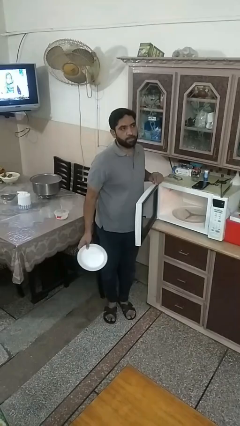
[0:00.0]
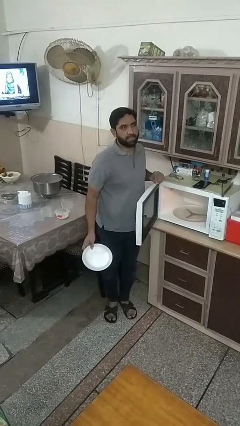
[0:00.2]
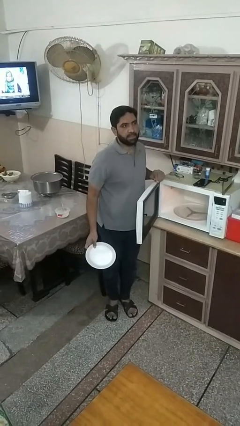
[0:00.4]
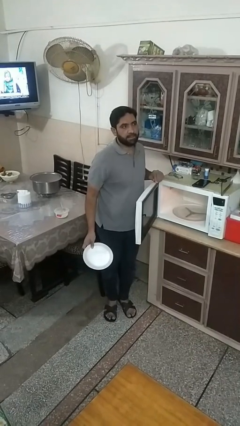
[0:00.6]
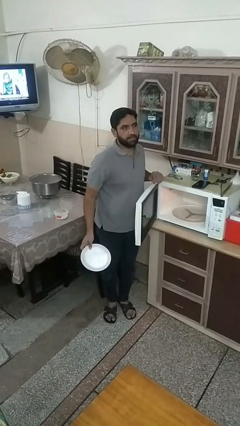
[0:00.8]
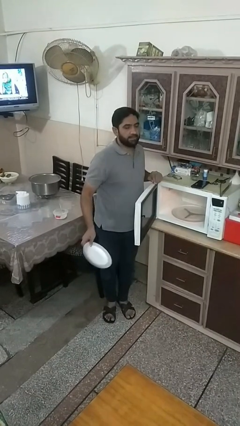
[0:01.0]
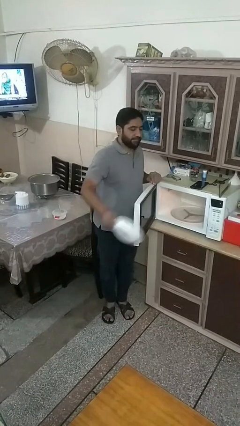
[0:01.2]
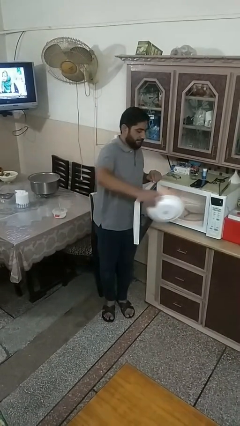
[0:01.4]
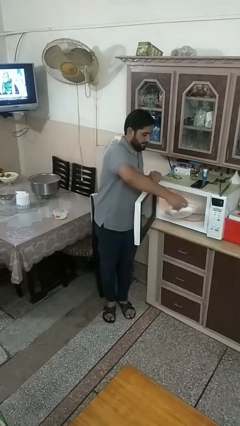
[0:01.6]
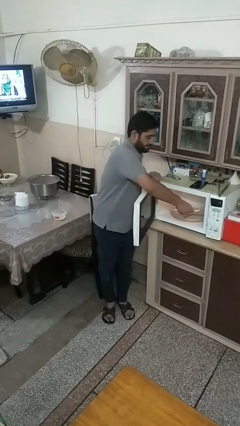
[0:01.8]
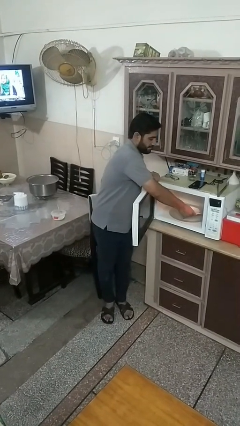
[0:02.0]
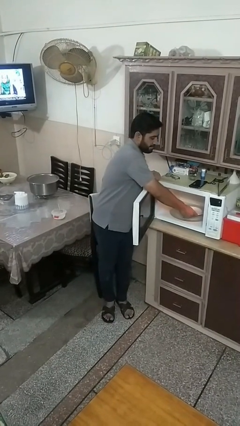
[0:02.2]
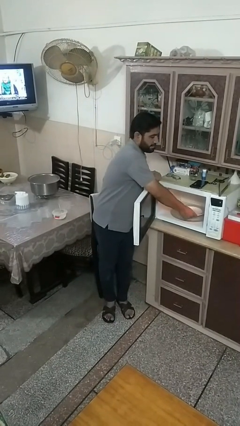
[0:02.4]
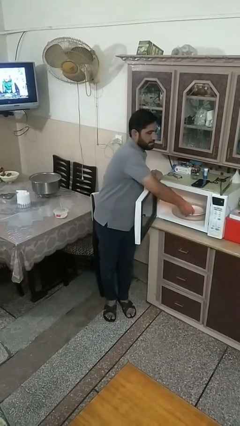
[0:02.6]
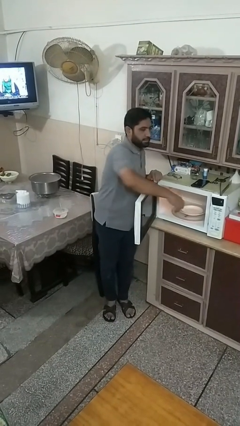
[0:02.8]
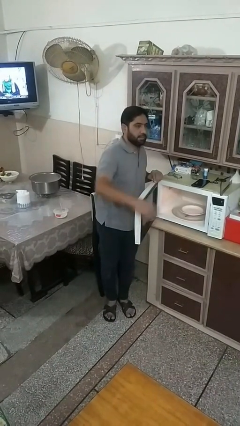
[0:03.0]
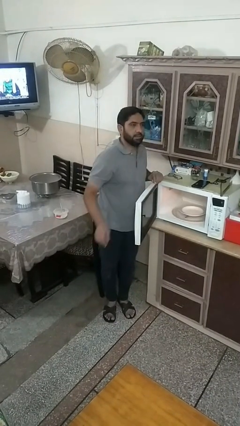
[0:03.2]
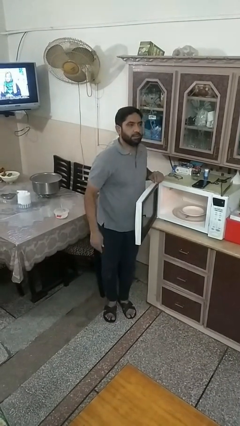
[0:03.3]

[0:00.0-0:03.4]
person puts object into microwave

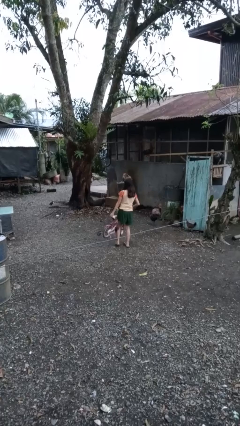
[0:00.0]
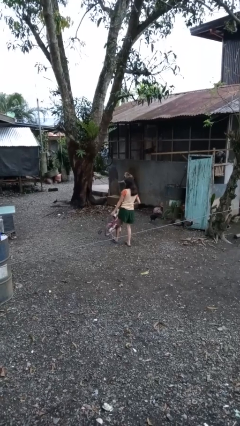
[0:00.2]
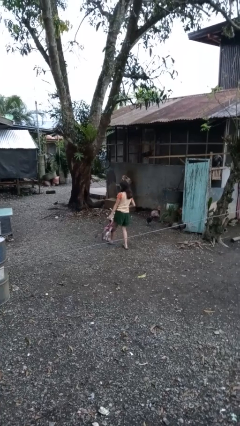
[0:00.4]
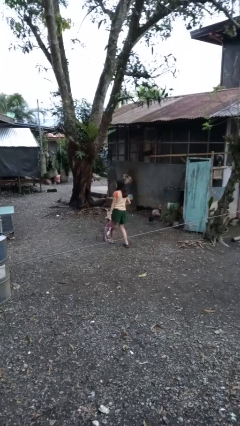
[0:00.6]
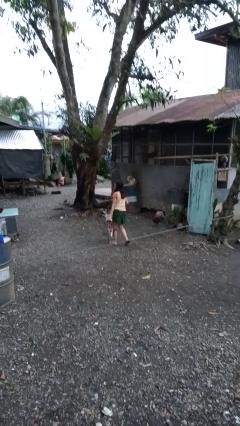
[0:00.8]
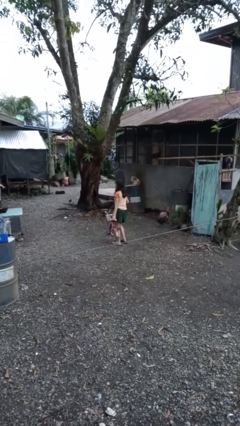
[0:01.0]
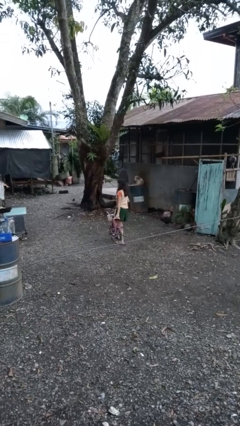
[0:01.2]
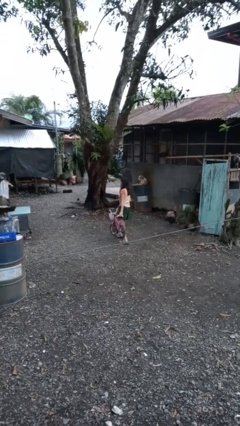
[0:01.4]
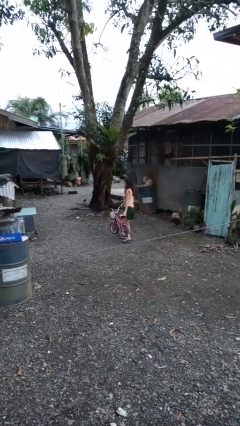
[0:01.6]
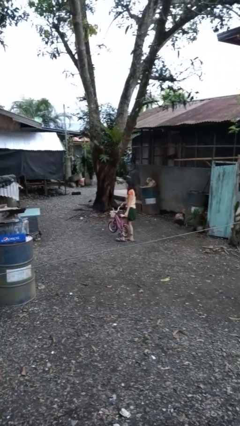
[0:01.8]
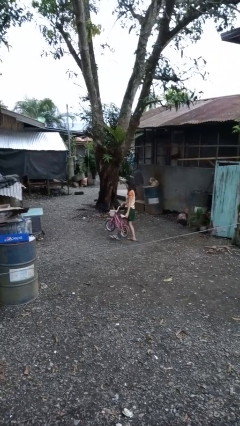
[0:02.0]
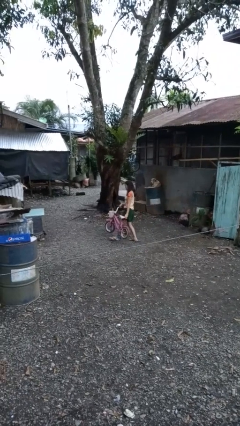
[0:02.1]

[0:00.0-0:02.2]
person carries bicycle

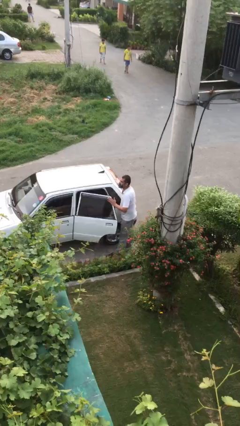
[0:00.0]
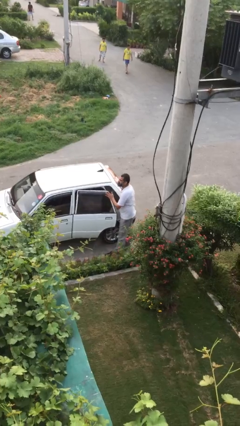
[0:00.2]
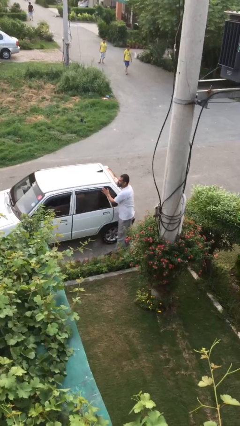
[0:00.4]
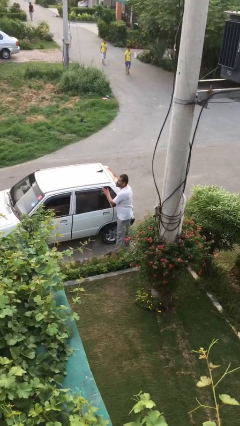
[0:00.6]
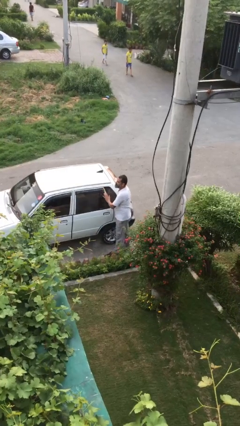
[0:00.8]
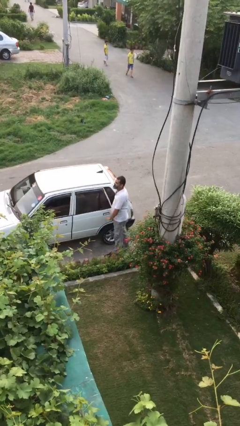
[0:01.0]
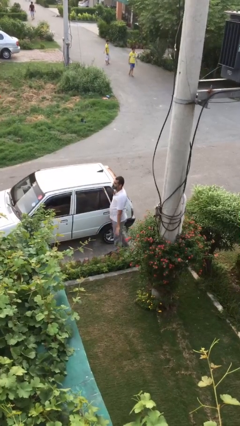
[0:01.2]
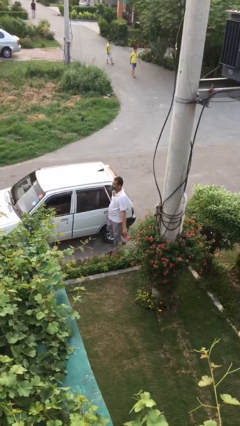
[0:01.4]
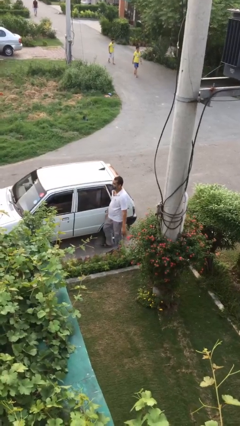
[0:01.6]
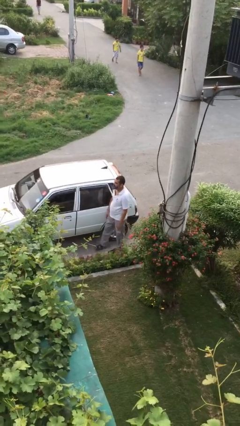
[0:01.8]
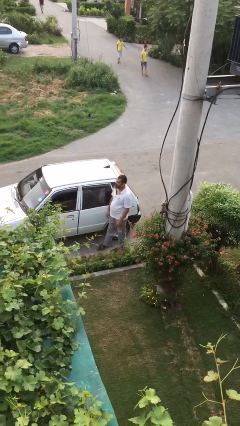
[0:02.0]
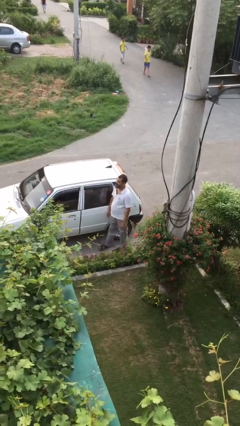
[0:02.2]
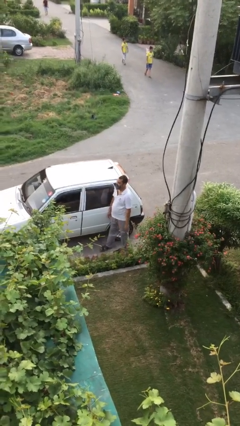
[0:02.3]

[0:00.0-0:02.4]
person closes car door

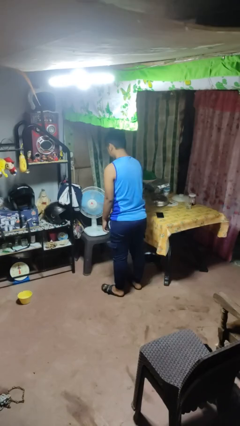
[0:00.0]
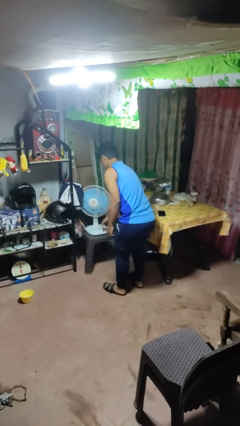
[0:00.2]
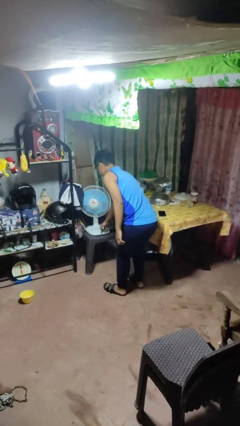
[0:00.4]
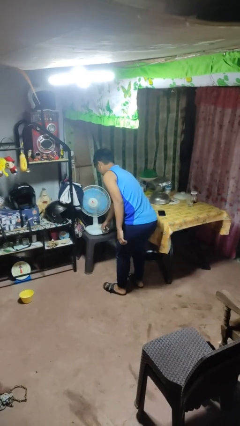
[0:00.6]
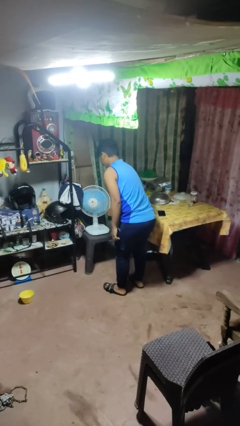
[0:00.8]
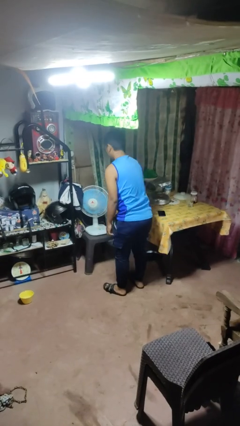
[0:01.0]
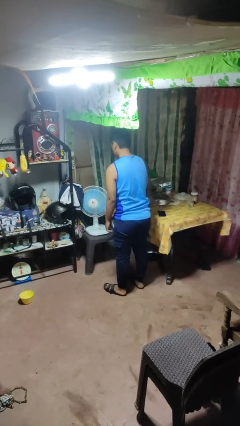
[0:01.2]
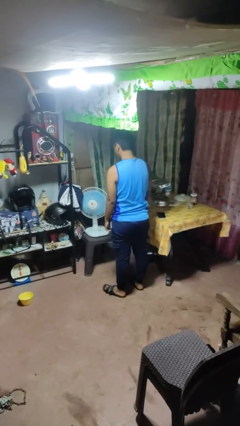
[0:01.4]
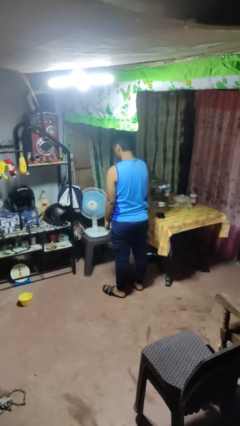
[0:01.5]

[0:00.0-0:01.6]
person turns on fan

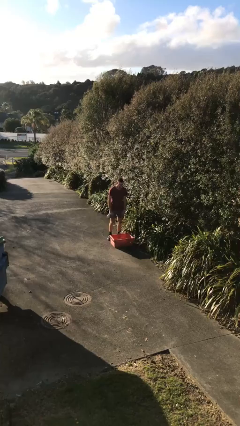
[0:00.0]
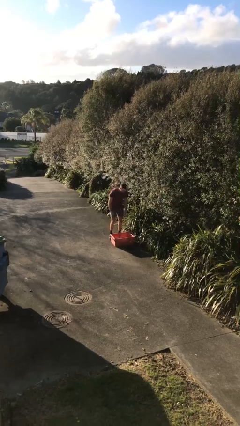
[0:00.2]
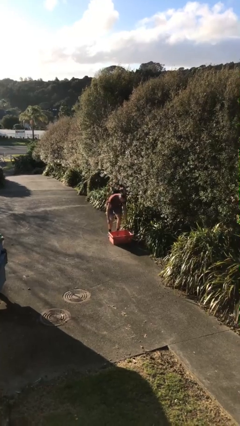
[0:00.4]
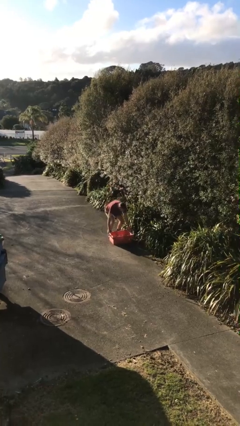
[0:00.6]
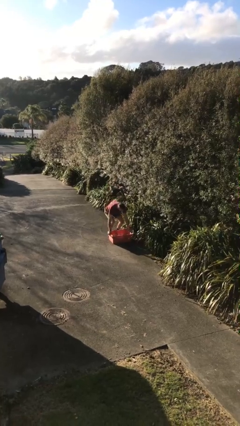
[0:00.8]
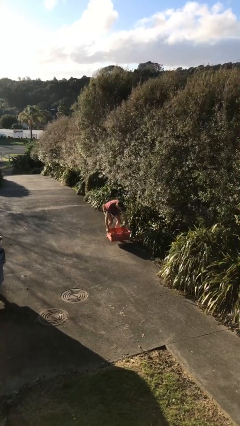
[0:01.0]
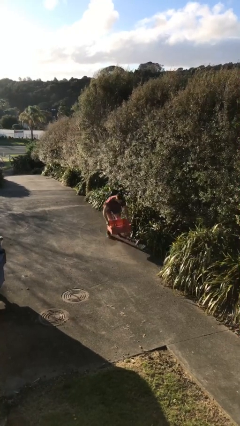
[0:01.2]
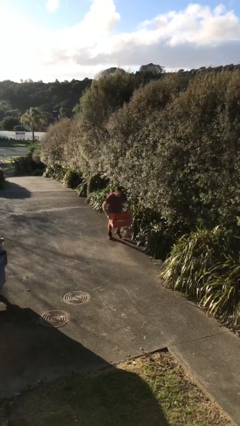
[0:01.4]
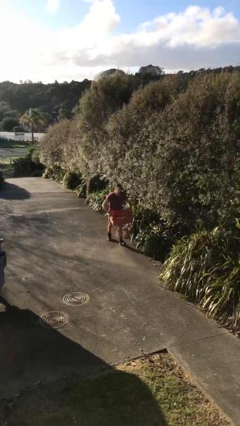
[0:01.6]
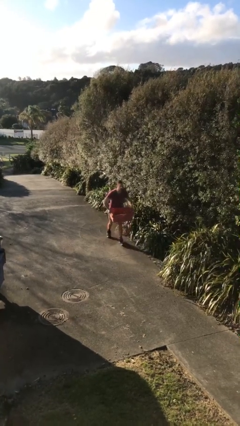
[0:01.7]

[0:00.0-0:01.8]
person picks up object from floor

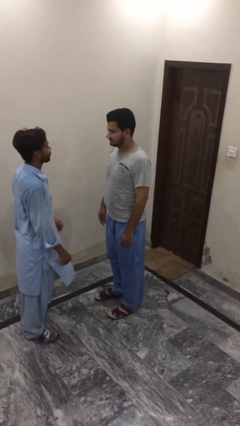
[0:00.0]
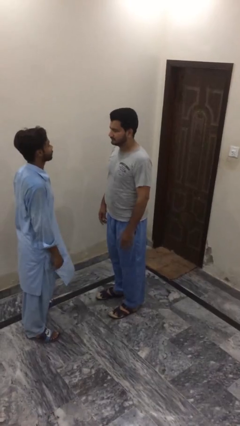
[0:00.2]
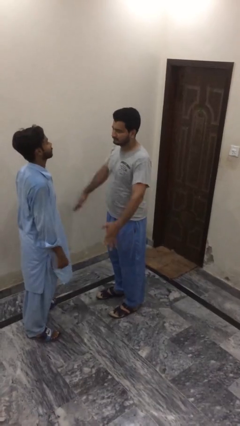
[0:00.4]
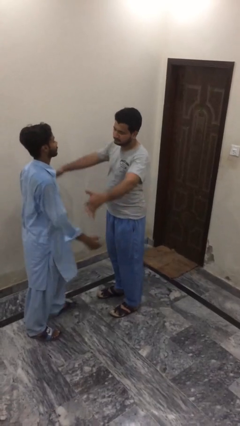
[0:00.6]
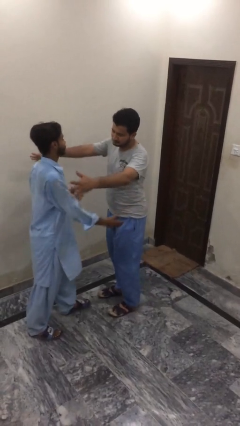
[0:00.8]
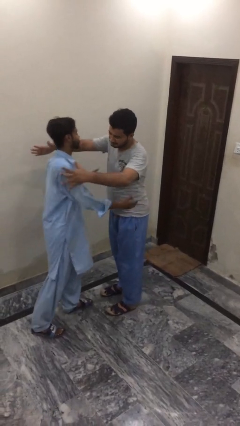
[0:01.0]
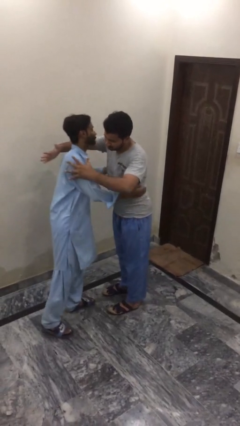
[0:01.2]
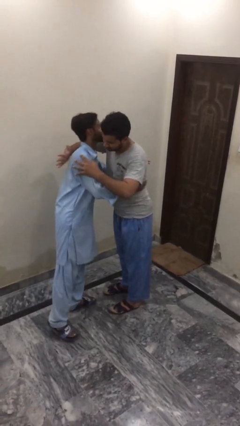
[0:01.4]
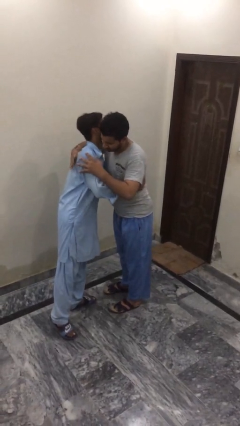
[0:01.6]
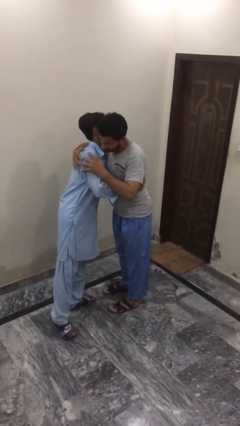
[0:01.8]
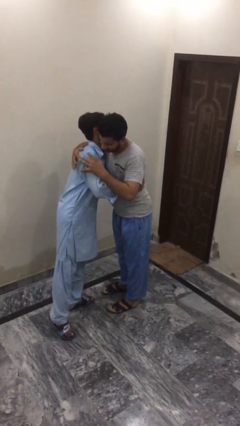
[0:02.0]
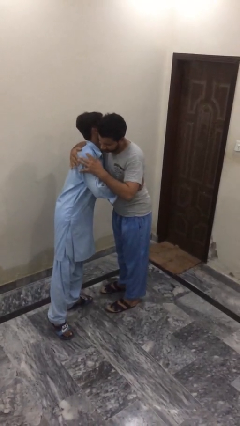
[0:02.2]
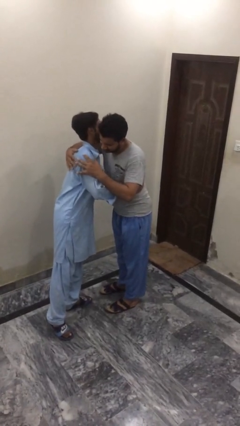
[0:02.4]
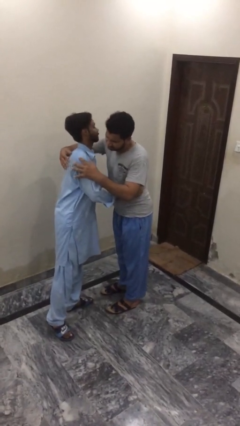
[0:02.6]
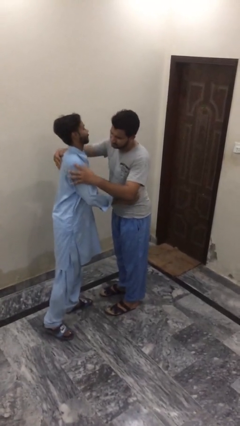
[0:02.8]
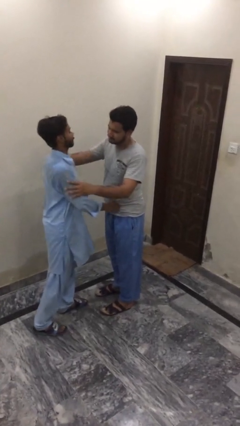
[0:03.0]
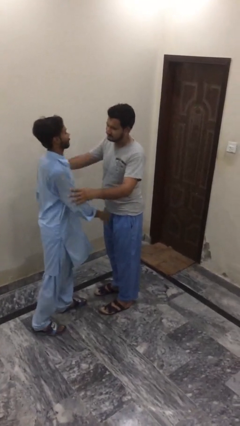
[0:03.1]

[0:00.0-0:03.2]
person embraces person

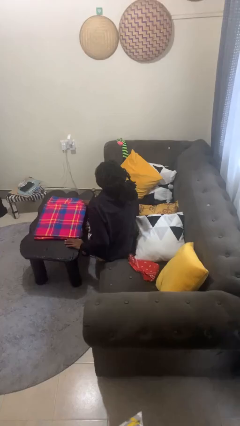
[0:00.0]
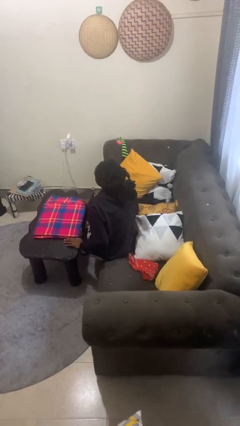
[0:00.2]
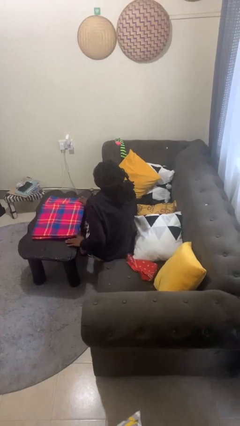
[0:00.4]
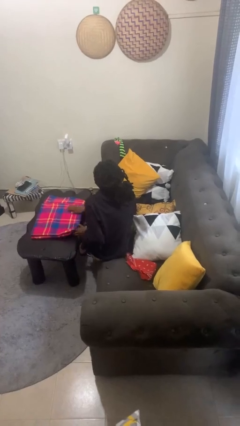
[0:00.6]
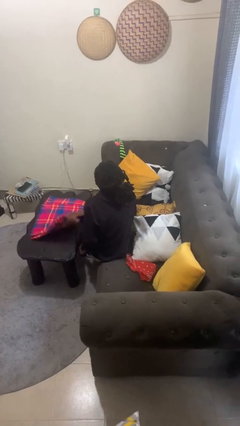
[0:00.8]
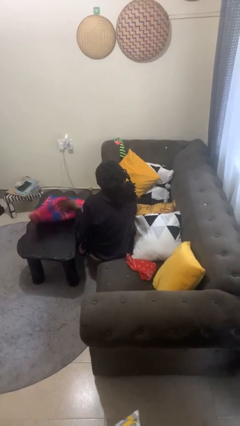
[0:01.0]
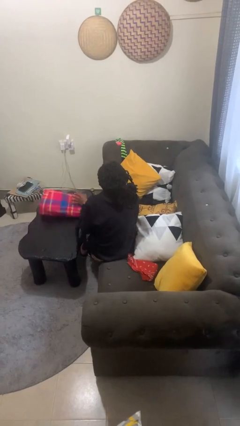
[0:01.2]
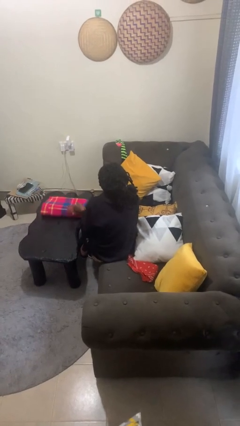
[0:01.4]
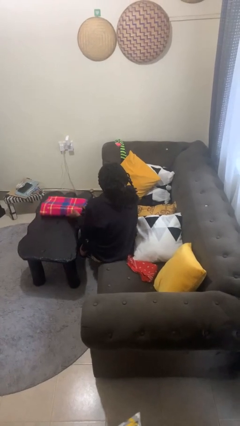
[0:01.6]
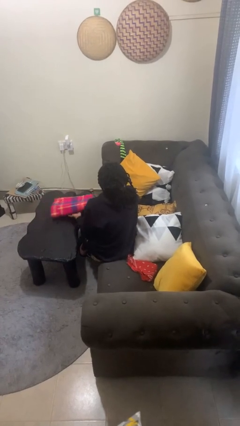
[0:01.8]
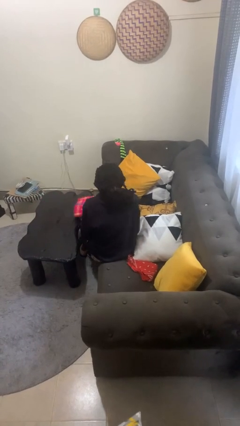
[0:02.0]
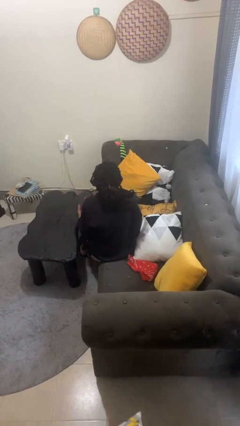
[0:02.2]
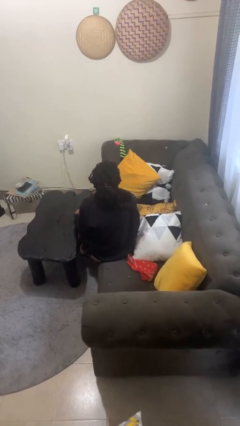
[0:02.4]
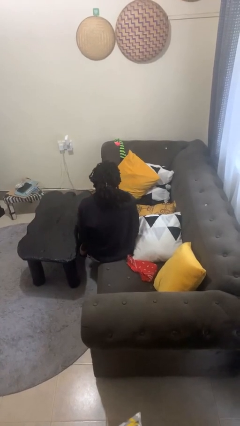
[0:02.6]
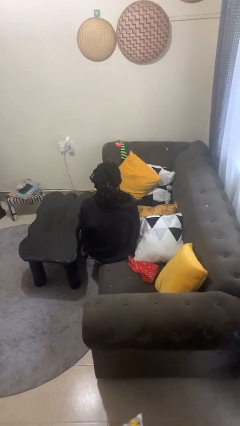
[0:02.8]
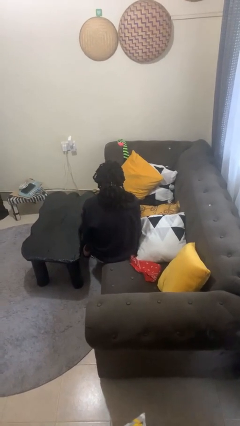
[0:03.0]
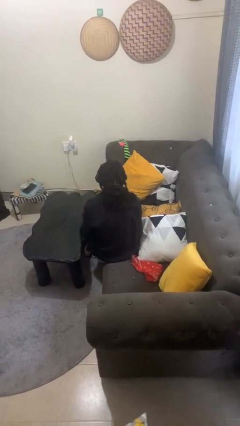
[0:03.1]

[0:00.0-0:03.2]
person folds tablecloth
